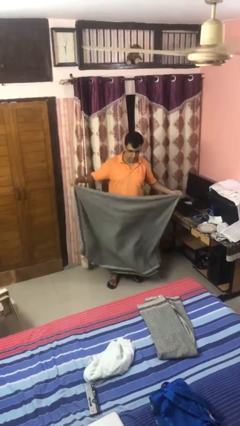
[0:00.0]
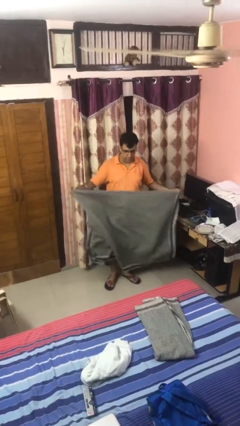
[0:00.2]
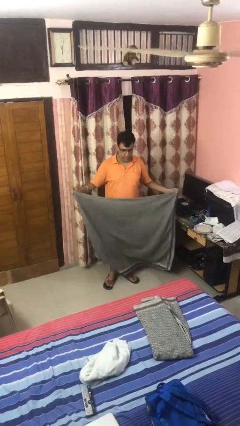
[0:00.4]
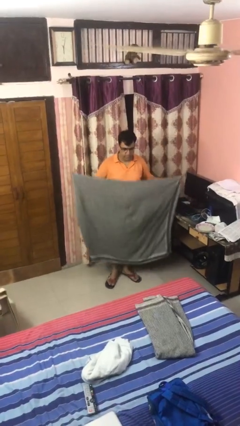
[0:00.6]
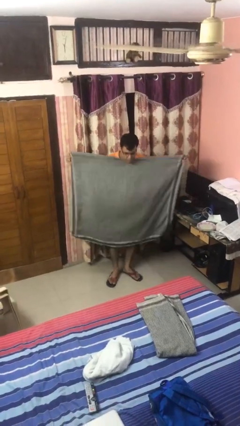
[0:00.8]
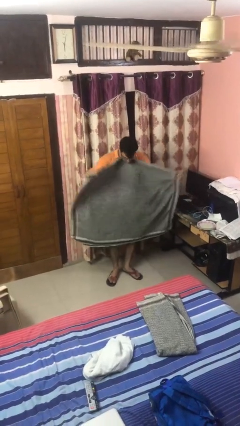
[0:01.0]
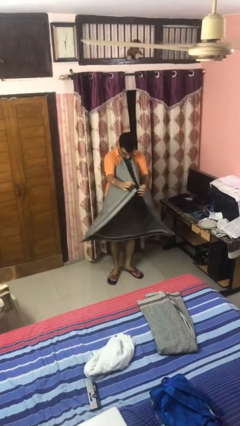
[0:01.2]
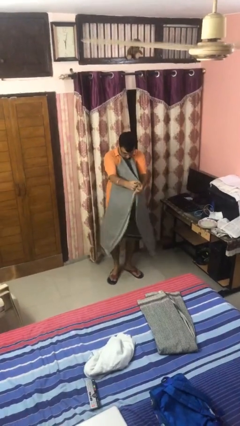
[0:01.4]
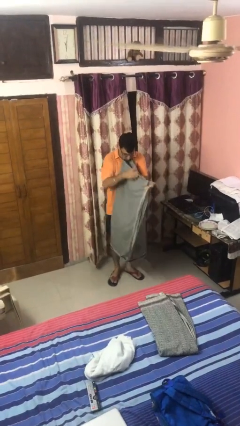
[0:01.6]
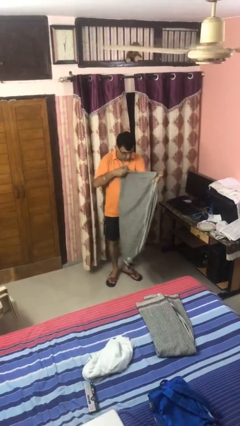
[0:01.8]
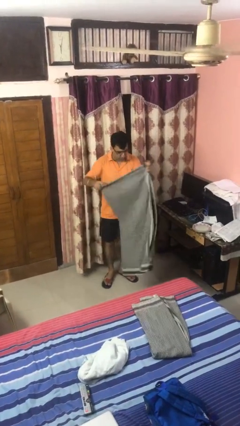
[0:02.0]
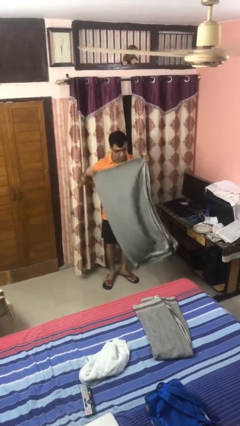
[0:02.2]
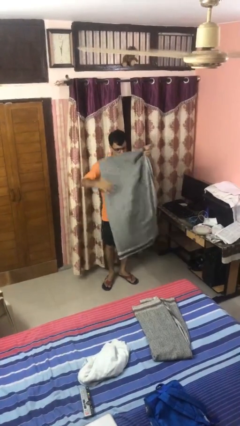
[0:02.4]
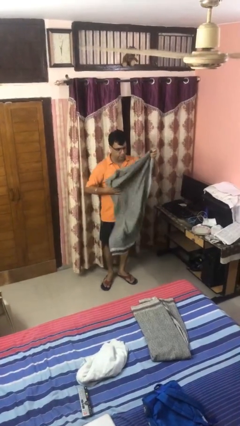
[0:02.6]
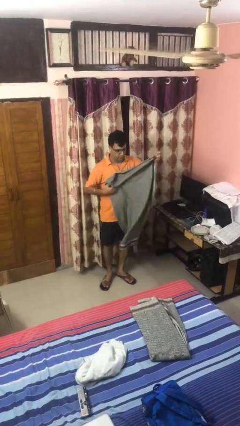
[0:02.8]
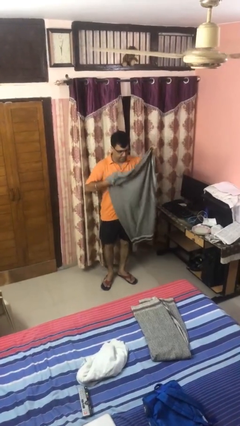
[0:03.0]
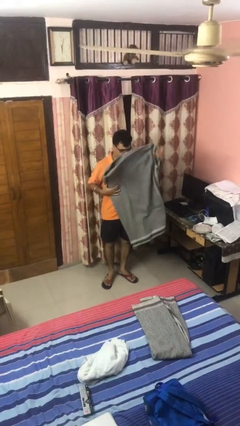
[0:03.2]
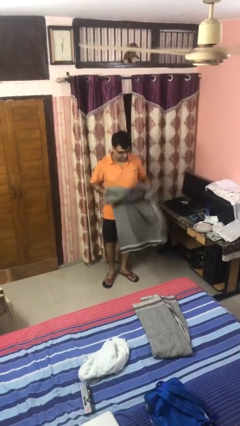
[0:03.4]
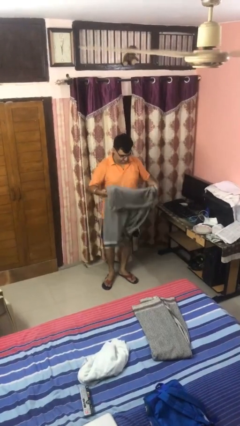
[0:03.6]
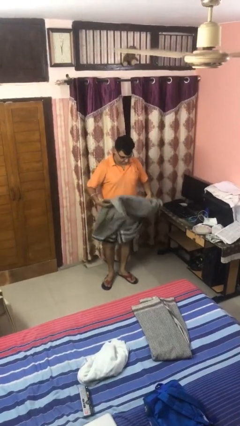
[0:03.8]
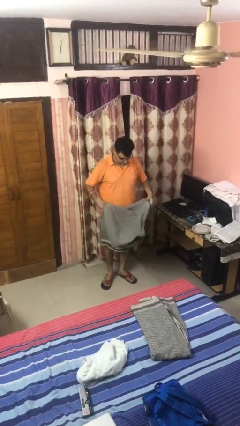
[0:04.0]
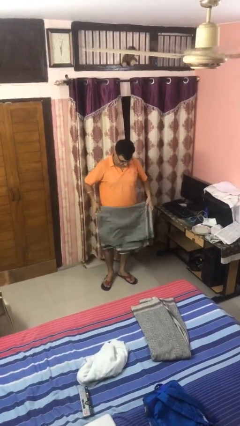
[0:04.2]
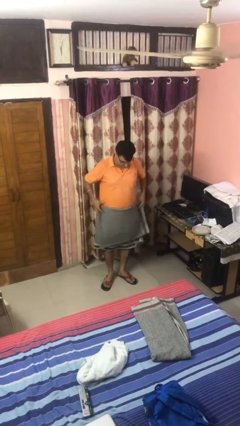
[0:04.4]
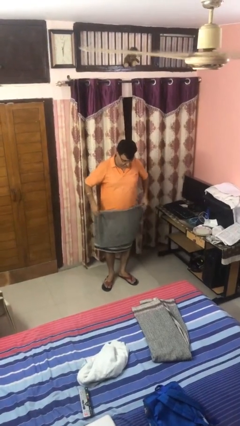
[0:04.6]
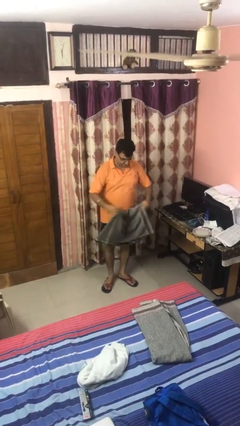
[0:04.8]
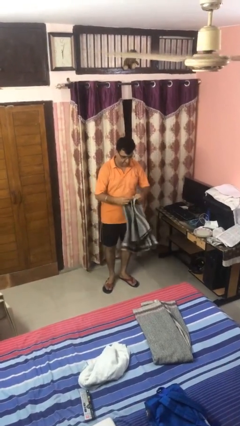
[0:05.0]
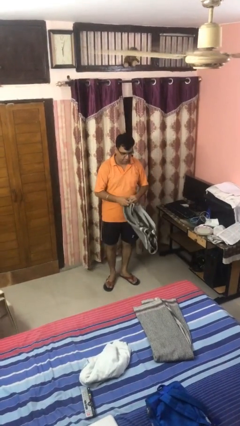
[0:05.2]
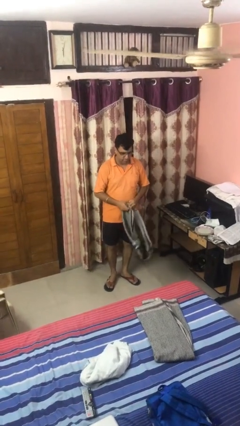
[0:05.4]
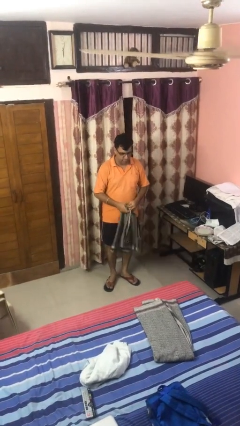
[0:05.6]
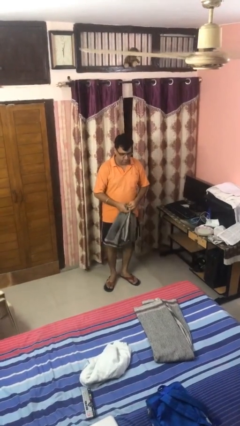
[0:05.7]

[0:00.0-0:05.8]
person folds blanket

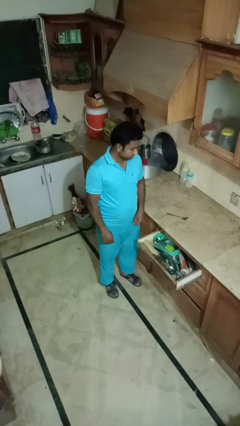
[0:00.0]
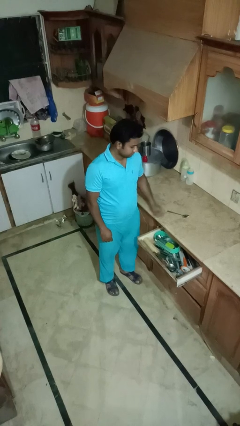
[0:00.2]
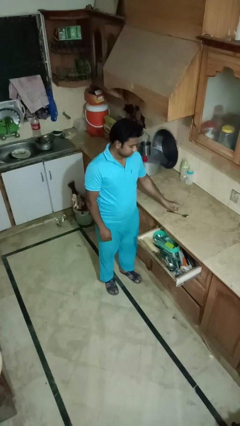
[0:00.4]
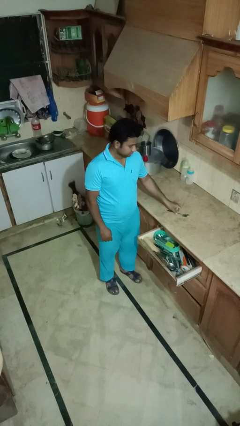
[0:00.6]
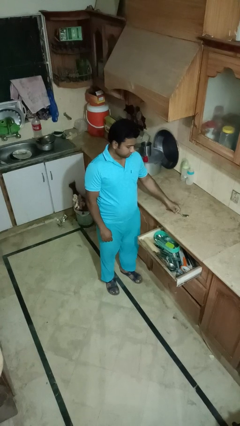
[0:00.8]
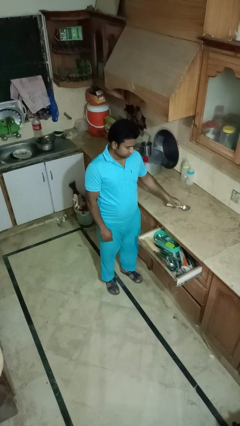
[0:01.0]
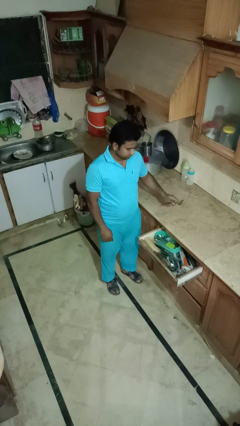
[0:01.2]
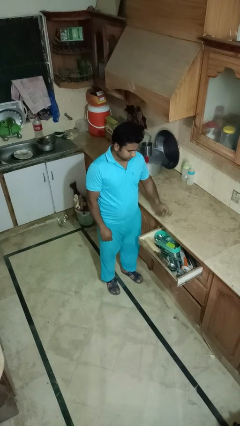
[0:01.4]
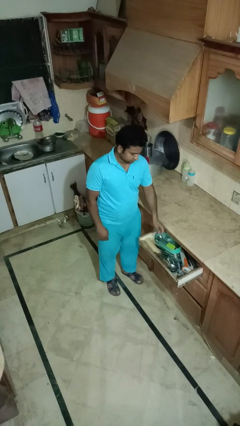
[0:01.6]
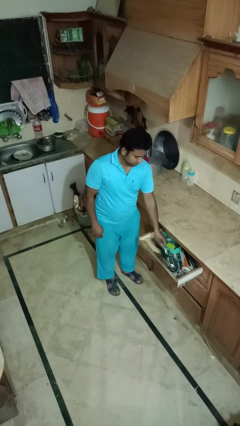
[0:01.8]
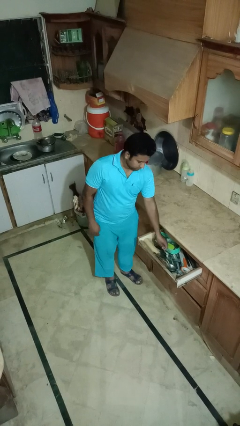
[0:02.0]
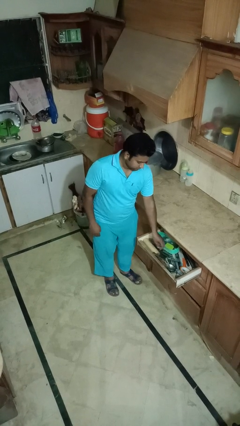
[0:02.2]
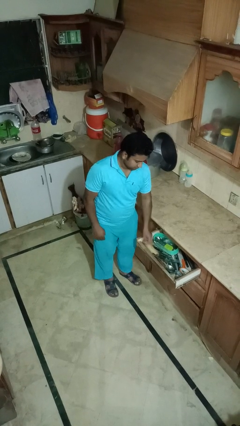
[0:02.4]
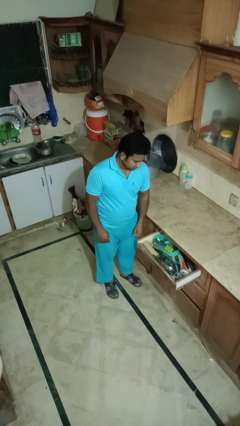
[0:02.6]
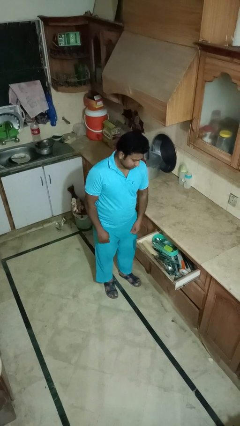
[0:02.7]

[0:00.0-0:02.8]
person puts object into kitchen drawer

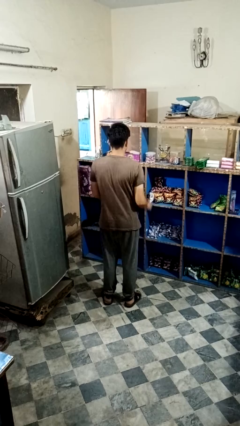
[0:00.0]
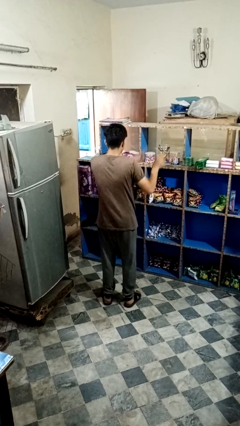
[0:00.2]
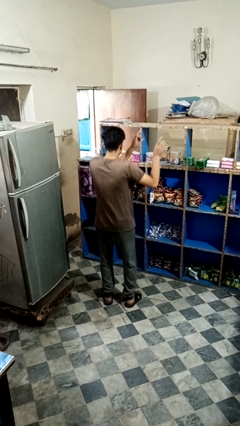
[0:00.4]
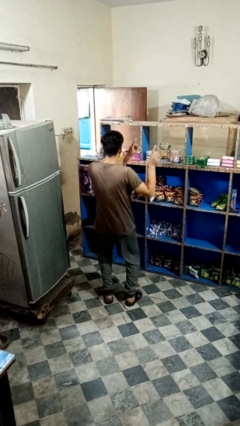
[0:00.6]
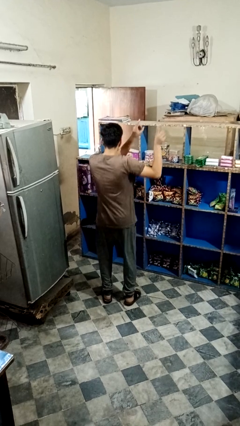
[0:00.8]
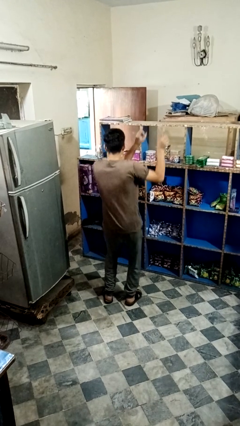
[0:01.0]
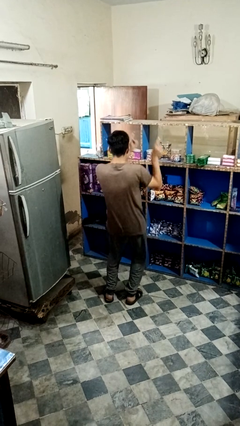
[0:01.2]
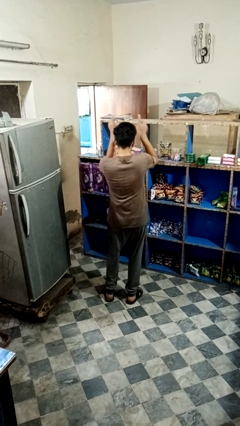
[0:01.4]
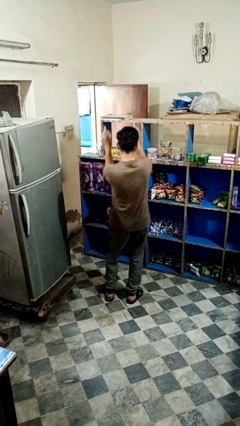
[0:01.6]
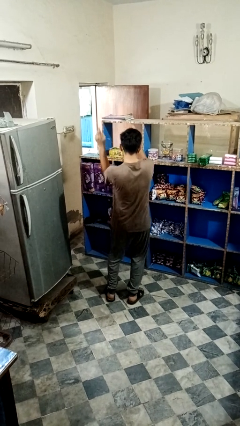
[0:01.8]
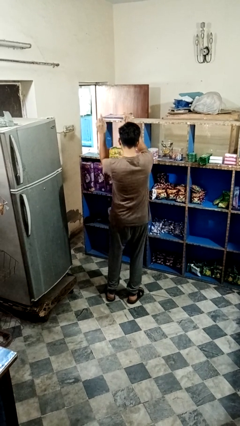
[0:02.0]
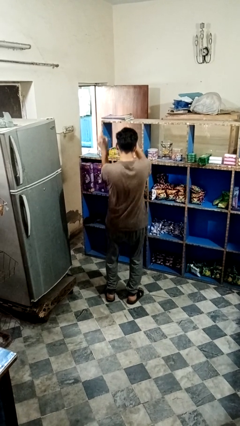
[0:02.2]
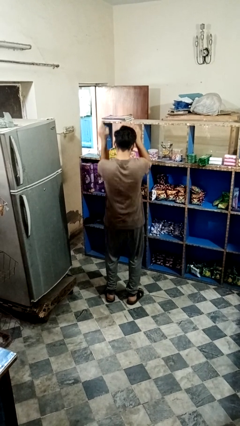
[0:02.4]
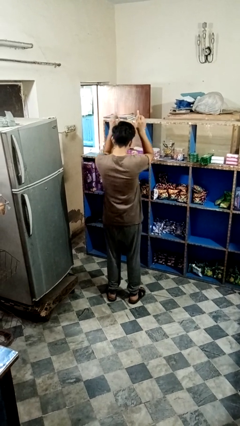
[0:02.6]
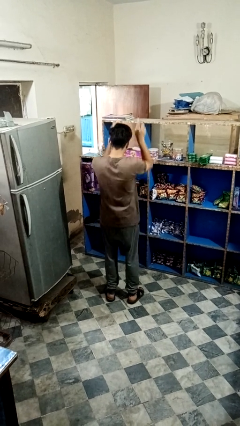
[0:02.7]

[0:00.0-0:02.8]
person dances in place

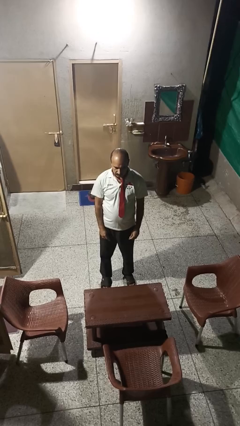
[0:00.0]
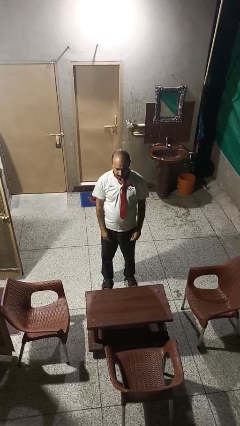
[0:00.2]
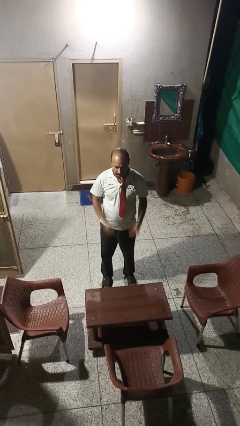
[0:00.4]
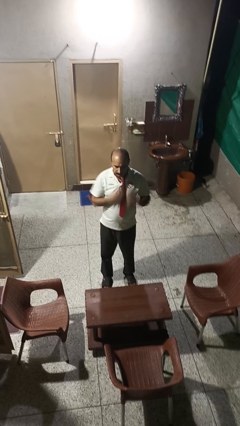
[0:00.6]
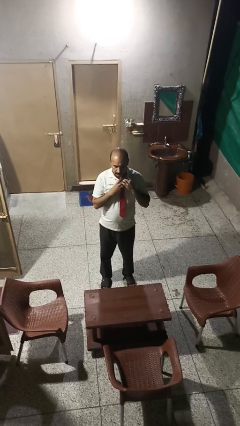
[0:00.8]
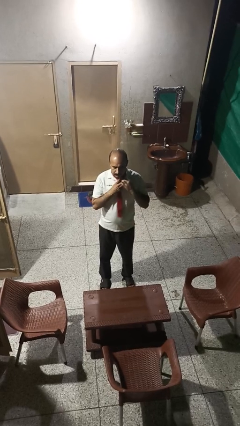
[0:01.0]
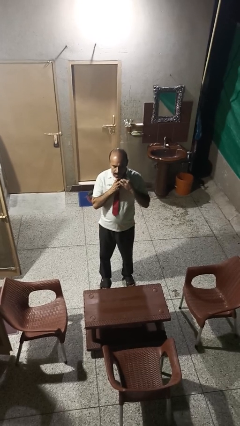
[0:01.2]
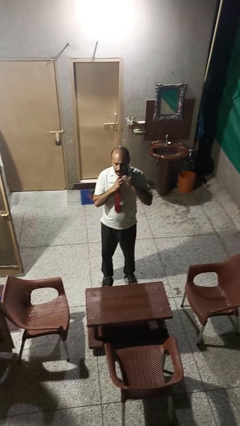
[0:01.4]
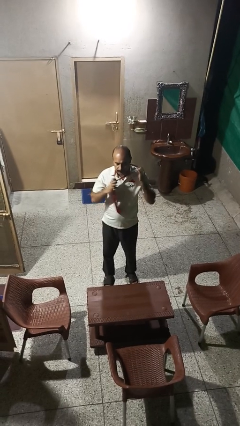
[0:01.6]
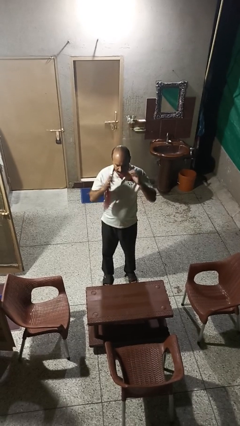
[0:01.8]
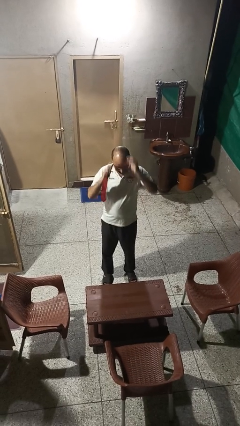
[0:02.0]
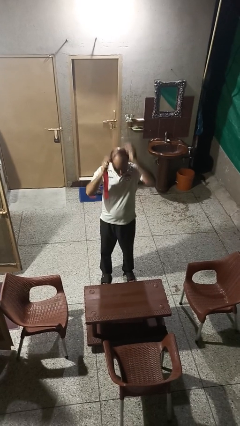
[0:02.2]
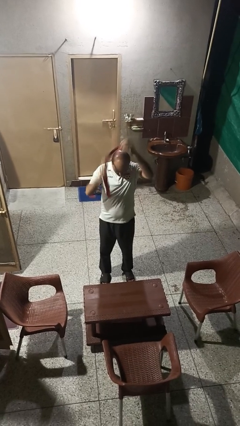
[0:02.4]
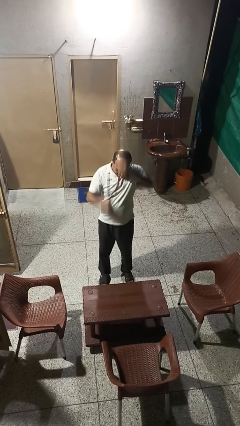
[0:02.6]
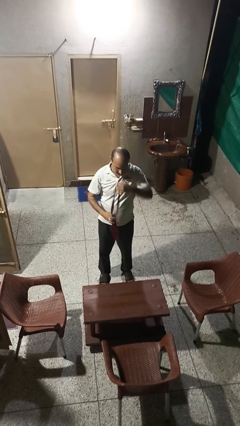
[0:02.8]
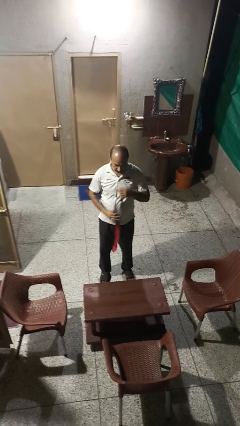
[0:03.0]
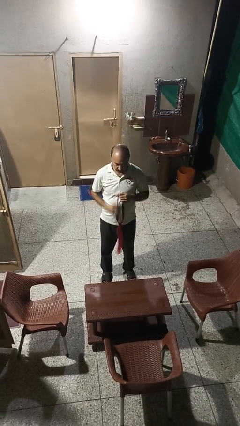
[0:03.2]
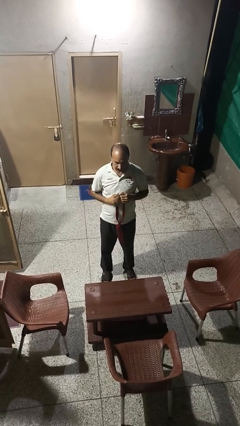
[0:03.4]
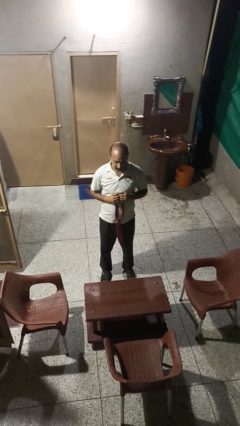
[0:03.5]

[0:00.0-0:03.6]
person takes off necktie

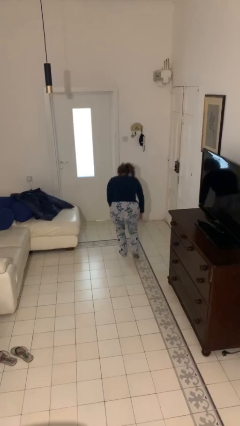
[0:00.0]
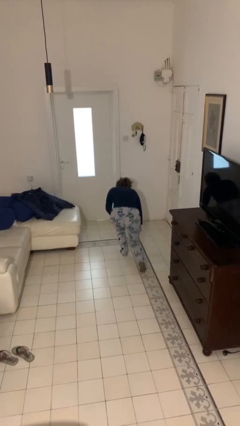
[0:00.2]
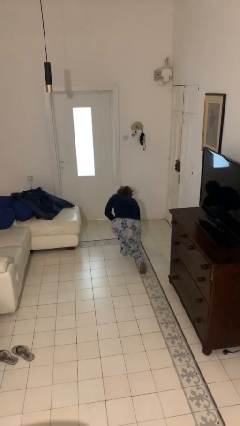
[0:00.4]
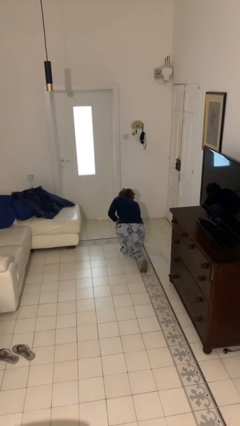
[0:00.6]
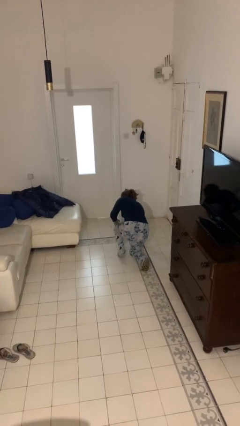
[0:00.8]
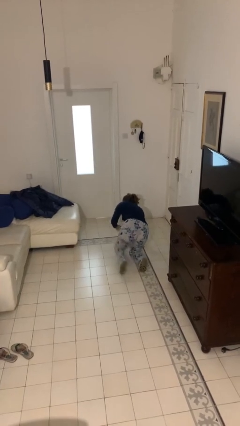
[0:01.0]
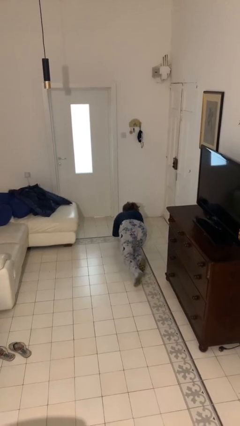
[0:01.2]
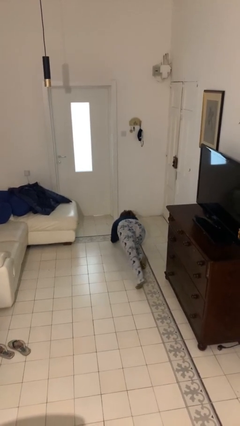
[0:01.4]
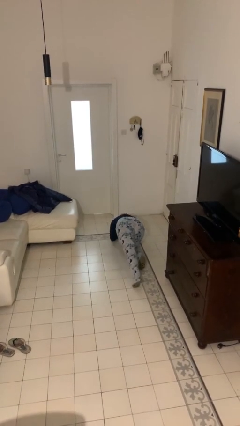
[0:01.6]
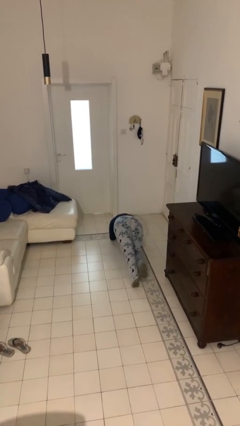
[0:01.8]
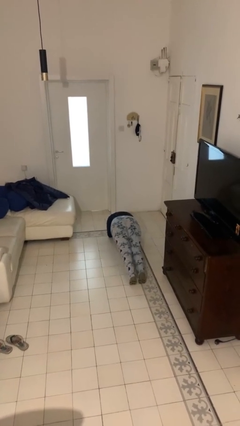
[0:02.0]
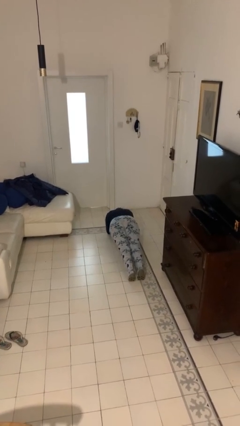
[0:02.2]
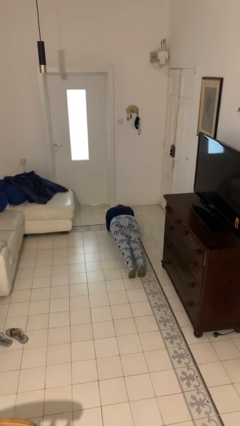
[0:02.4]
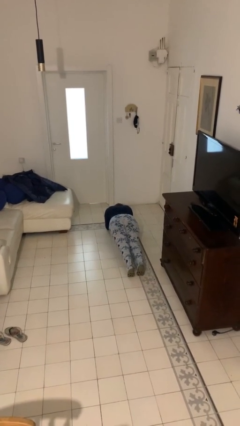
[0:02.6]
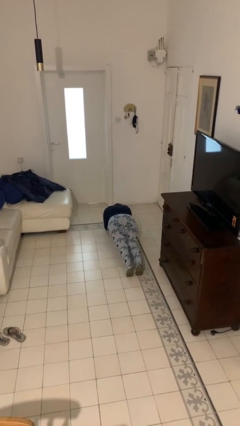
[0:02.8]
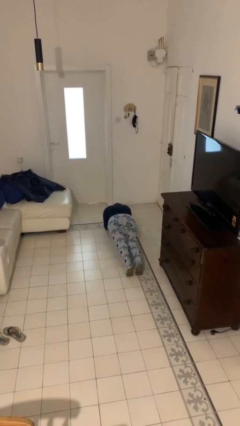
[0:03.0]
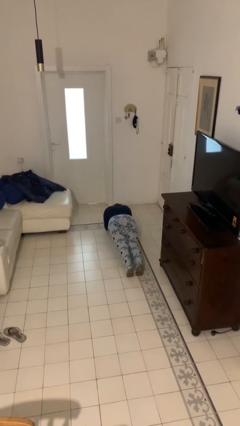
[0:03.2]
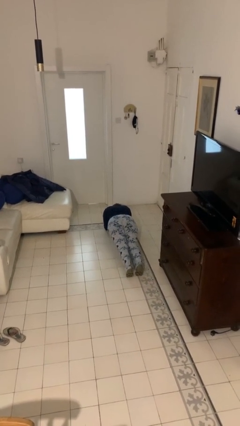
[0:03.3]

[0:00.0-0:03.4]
person exercises with plank
